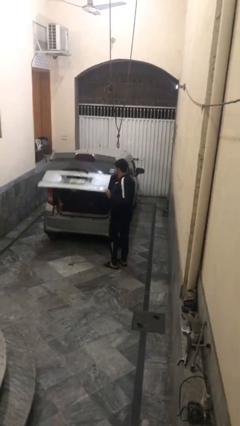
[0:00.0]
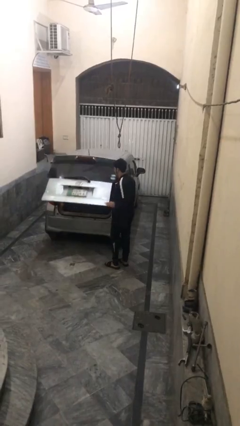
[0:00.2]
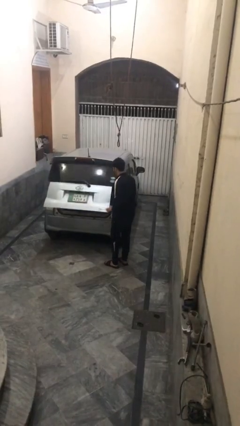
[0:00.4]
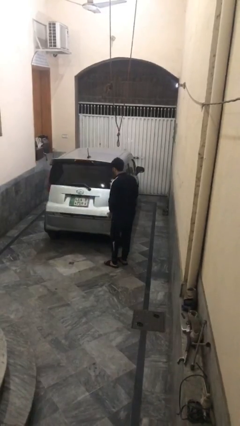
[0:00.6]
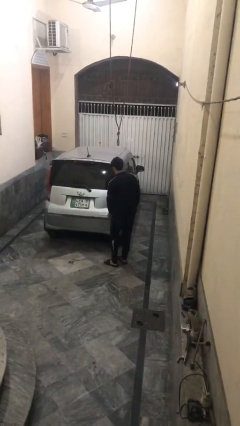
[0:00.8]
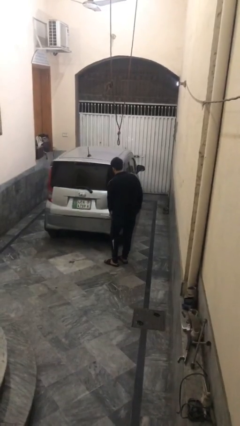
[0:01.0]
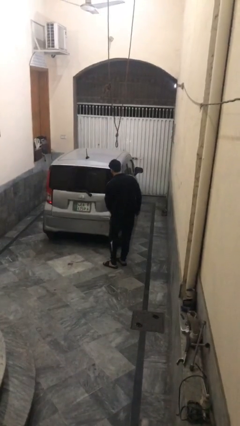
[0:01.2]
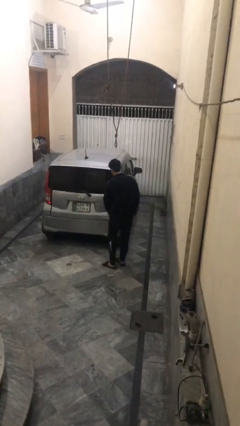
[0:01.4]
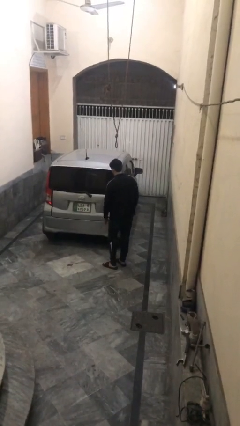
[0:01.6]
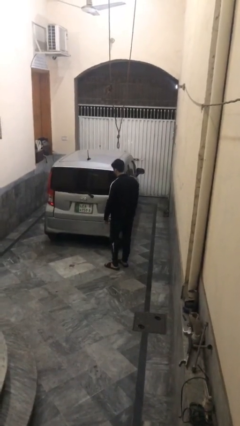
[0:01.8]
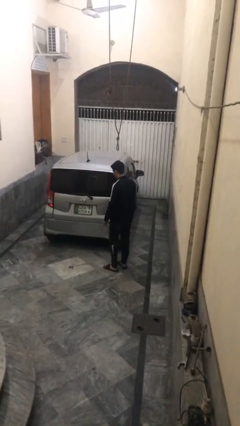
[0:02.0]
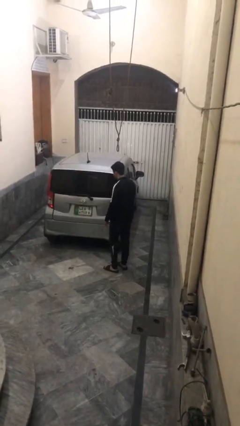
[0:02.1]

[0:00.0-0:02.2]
person closes car trunk

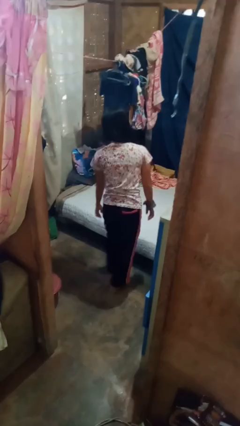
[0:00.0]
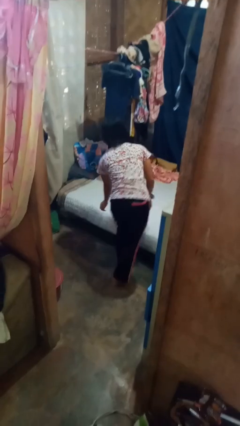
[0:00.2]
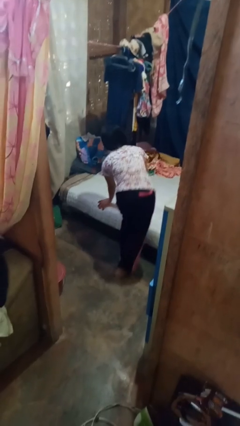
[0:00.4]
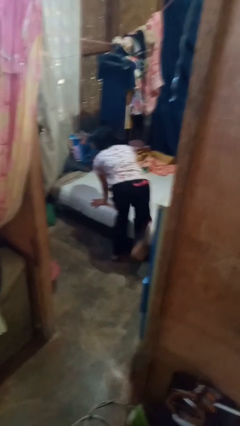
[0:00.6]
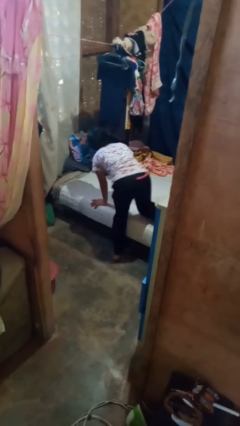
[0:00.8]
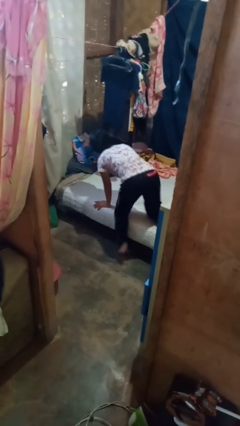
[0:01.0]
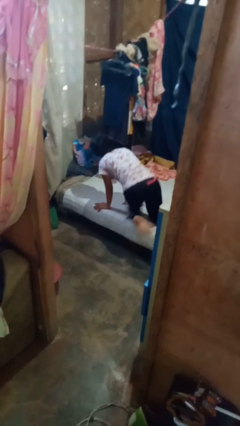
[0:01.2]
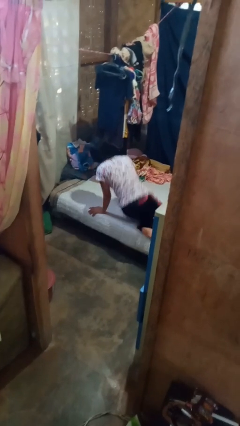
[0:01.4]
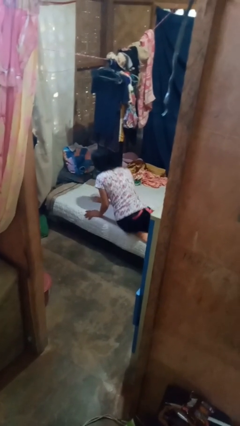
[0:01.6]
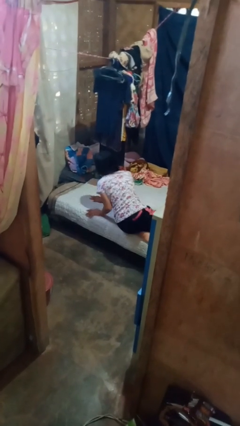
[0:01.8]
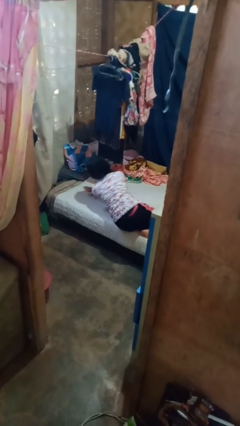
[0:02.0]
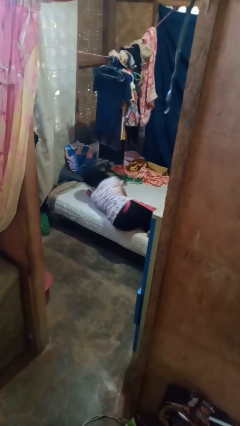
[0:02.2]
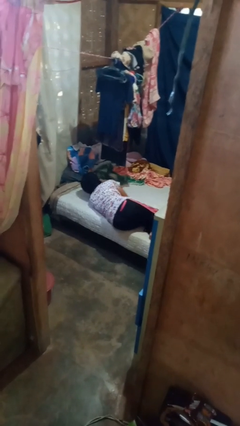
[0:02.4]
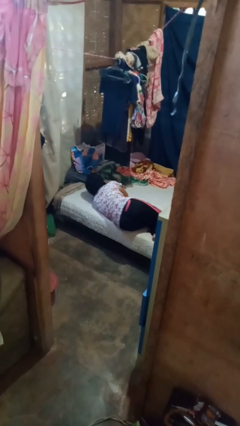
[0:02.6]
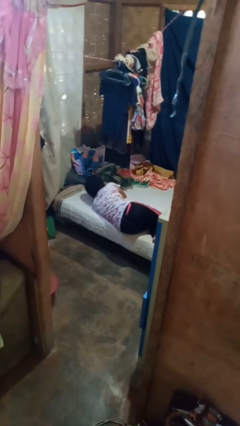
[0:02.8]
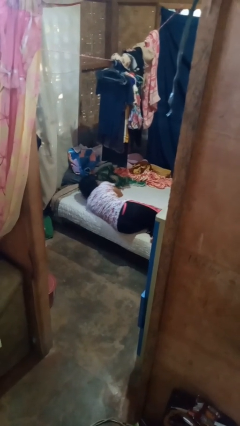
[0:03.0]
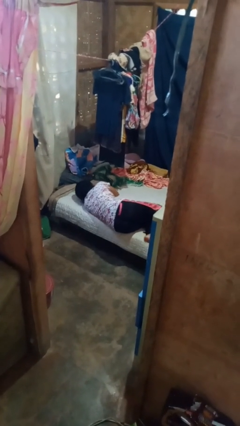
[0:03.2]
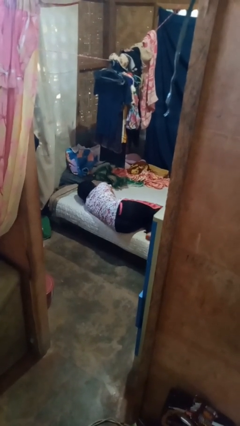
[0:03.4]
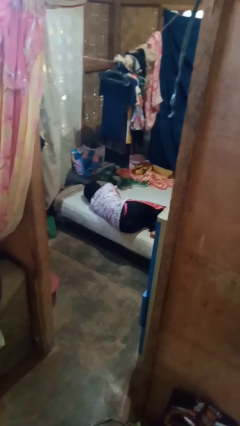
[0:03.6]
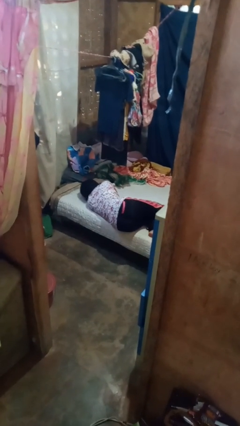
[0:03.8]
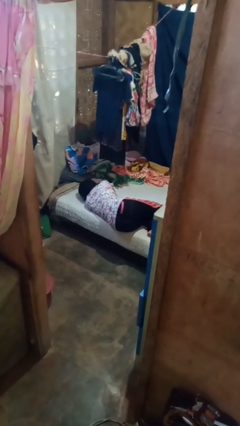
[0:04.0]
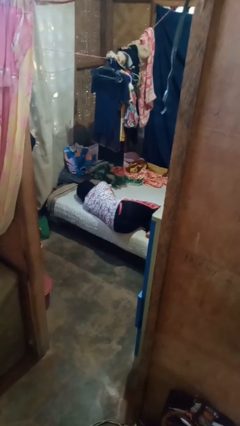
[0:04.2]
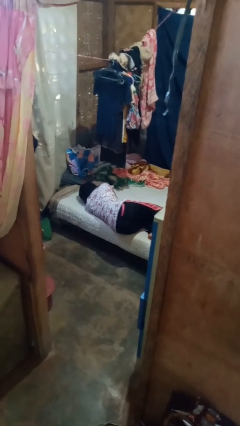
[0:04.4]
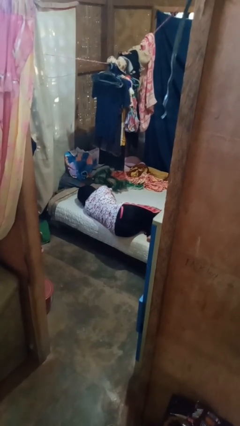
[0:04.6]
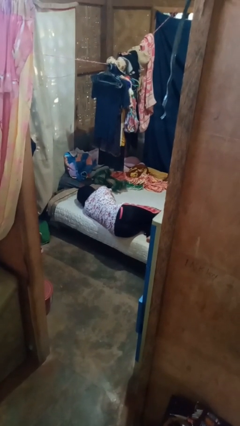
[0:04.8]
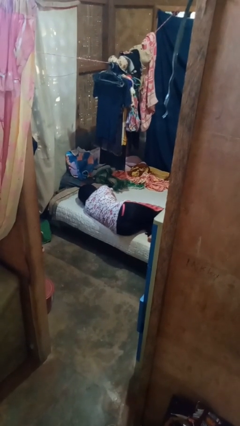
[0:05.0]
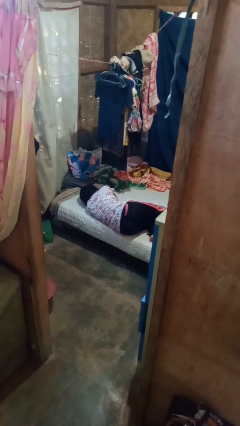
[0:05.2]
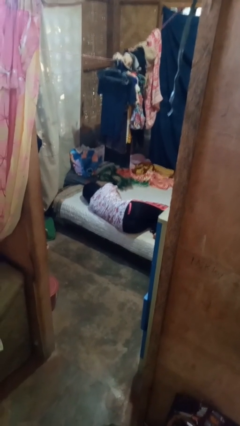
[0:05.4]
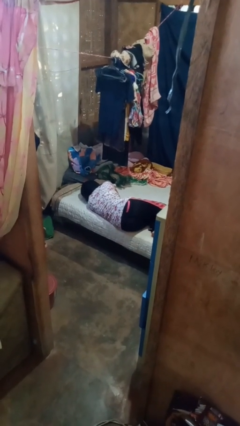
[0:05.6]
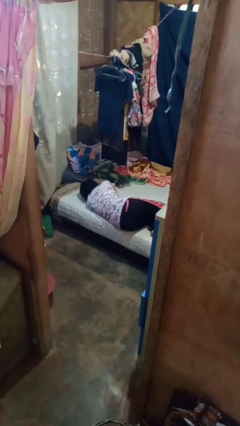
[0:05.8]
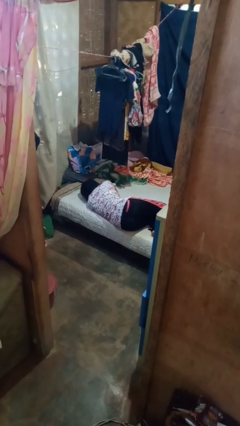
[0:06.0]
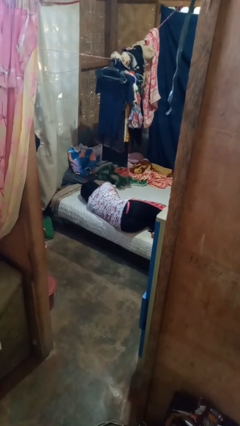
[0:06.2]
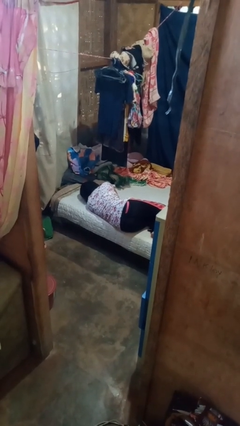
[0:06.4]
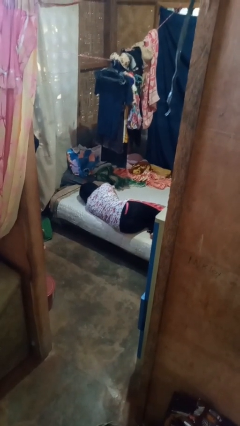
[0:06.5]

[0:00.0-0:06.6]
person lies down on bed

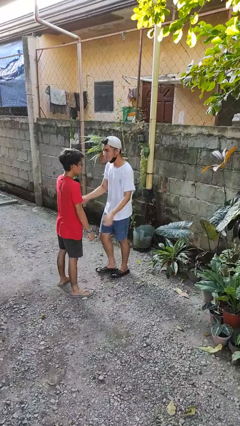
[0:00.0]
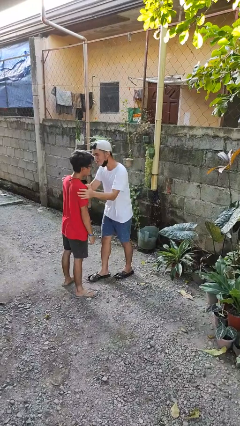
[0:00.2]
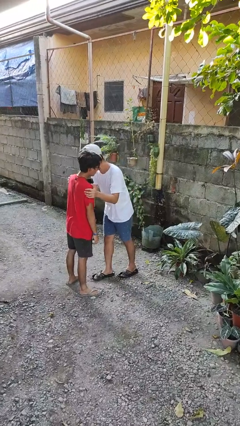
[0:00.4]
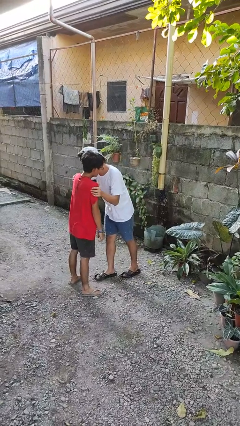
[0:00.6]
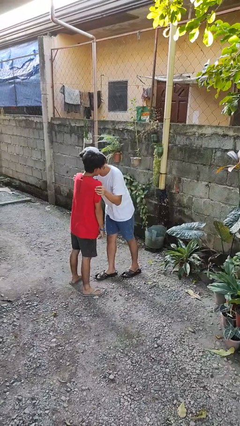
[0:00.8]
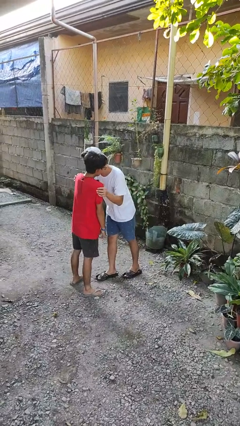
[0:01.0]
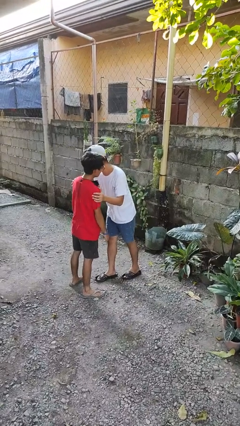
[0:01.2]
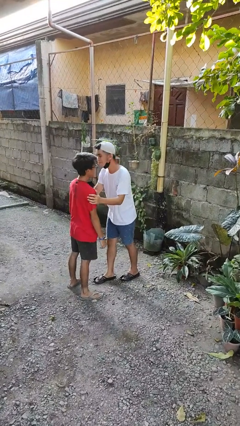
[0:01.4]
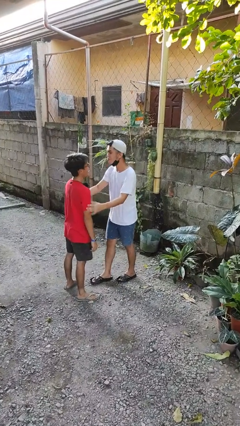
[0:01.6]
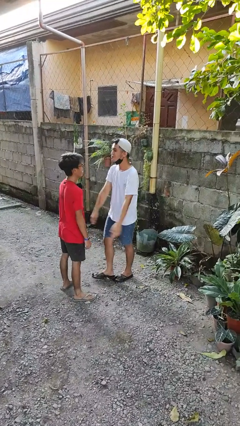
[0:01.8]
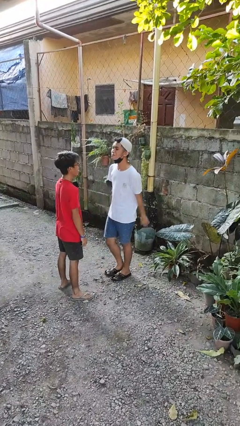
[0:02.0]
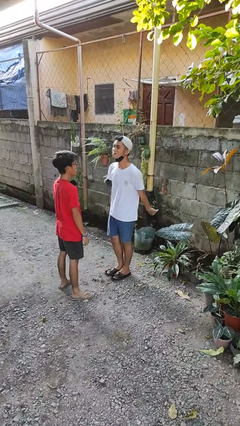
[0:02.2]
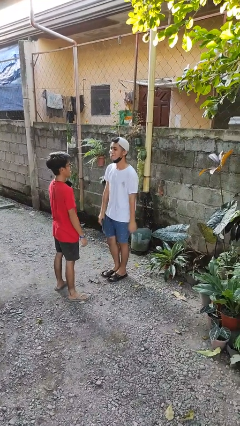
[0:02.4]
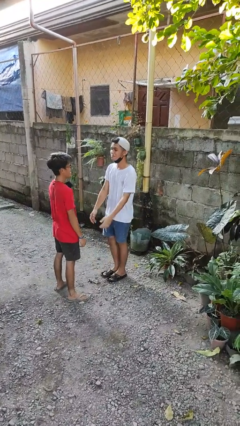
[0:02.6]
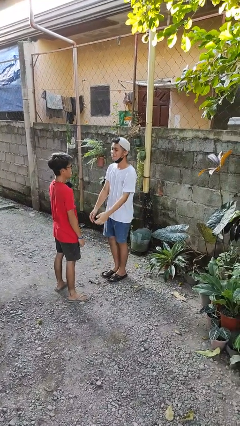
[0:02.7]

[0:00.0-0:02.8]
person kisses cheek of person

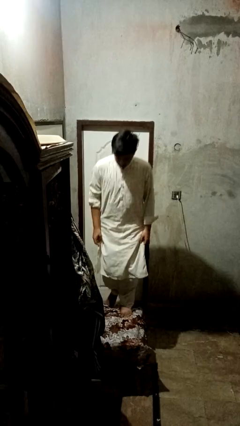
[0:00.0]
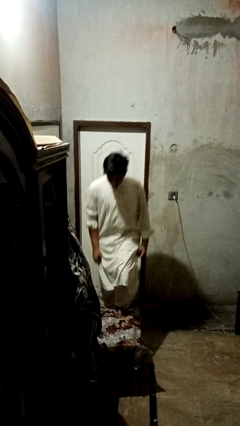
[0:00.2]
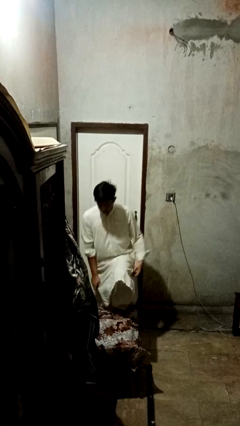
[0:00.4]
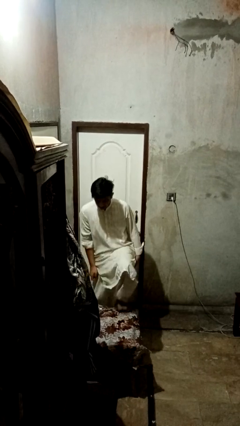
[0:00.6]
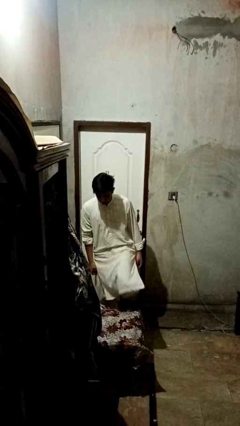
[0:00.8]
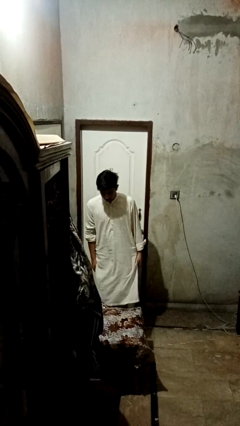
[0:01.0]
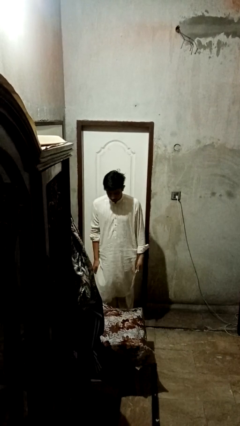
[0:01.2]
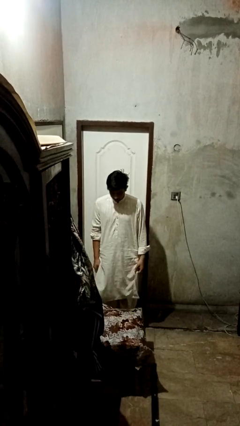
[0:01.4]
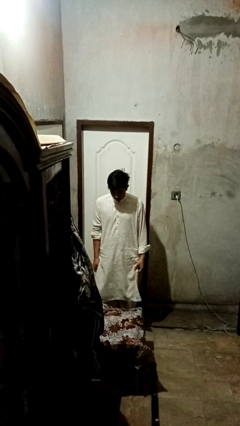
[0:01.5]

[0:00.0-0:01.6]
person climbs off table

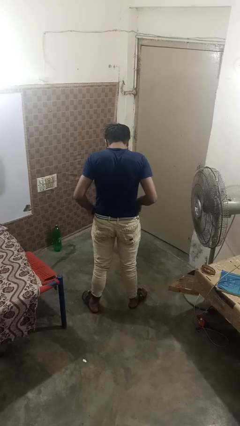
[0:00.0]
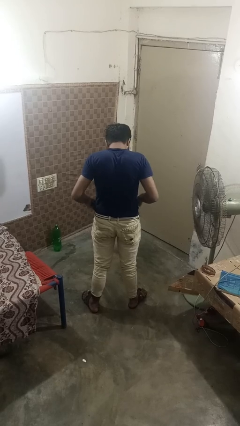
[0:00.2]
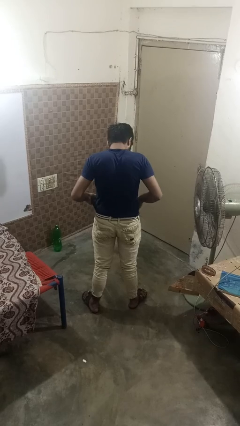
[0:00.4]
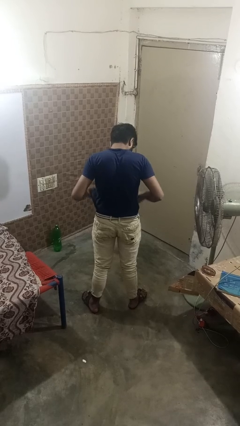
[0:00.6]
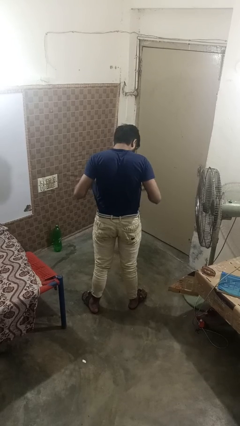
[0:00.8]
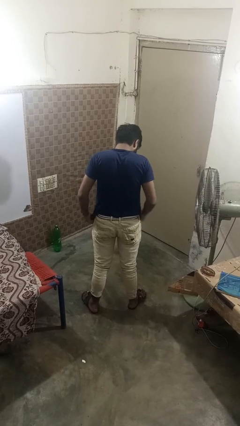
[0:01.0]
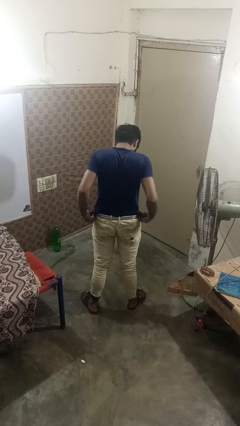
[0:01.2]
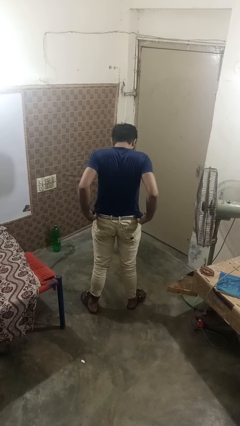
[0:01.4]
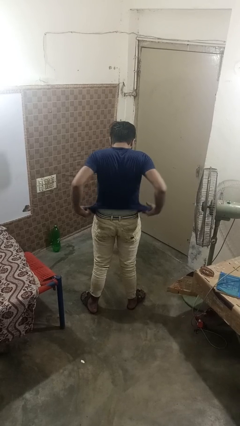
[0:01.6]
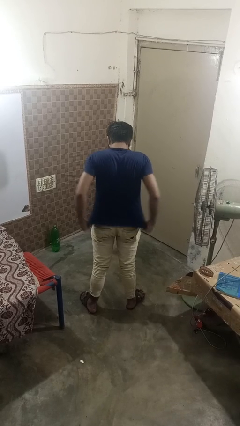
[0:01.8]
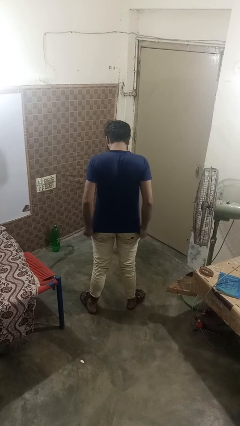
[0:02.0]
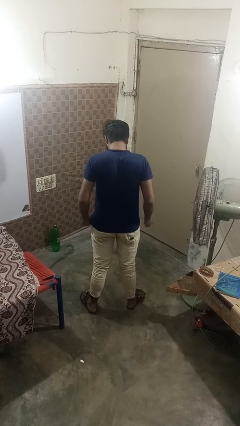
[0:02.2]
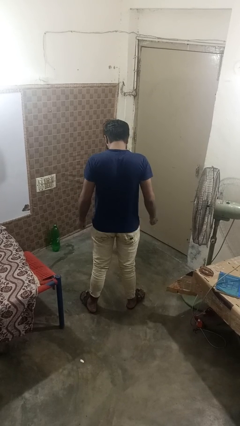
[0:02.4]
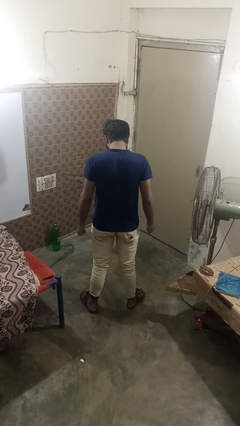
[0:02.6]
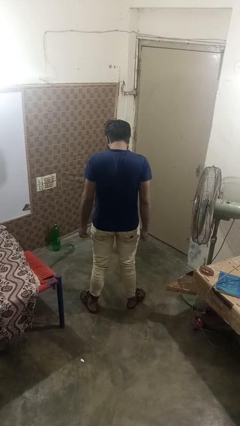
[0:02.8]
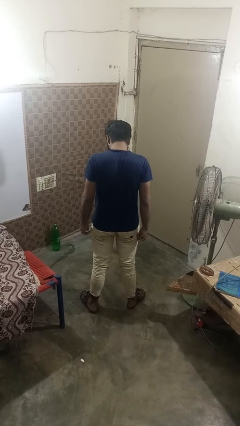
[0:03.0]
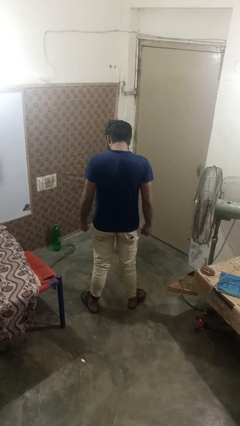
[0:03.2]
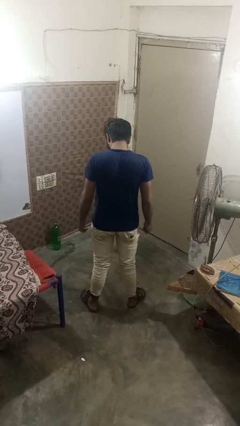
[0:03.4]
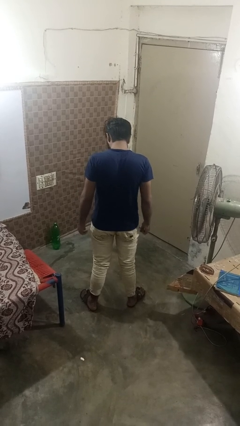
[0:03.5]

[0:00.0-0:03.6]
person untucks shirt

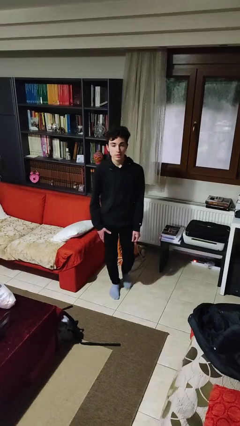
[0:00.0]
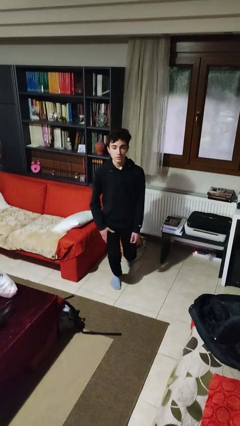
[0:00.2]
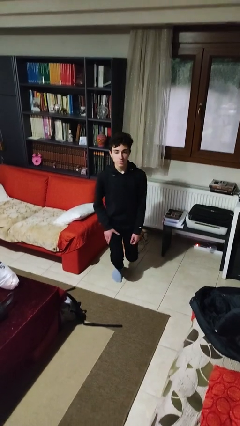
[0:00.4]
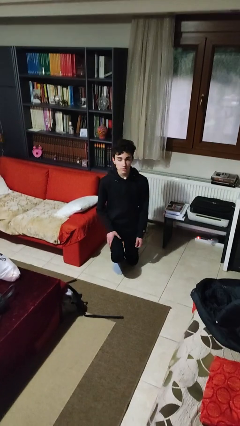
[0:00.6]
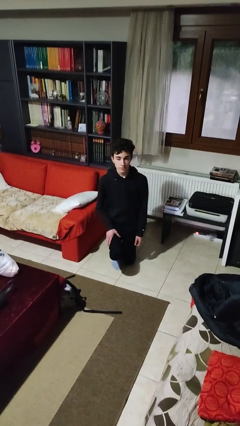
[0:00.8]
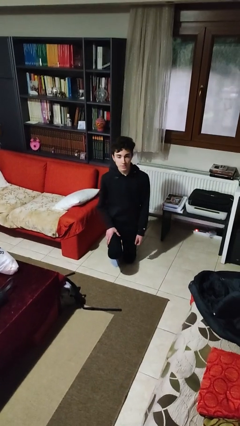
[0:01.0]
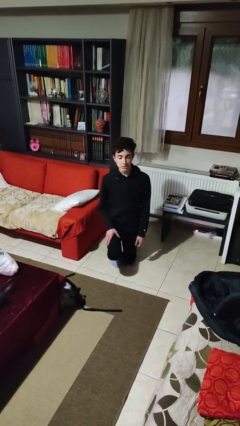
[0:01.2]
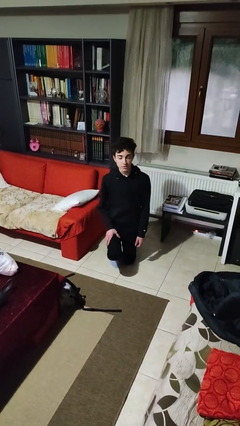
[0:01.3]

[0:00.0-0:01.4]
person kneels
